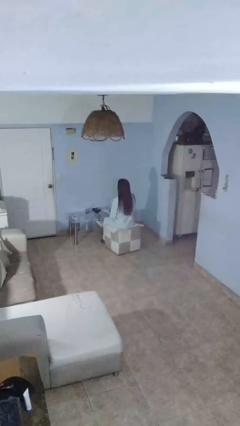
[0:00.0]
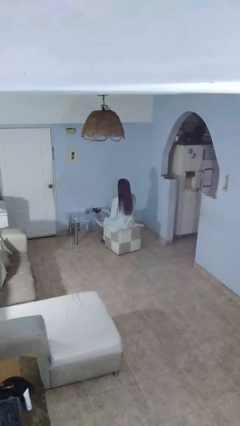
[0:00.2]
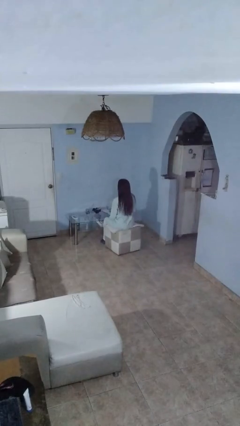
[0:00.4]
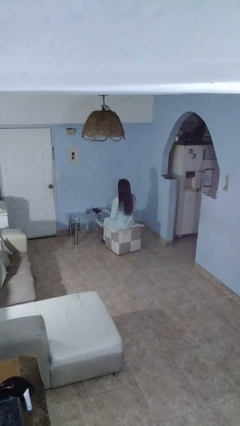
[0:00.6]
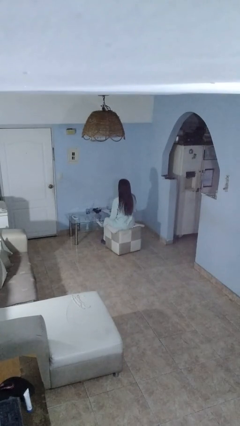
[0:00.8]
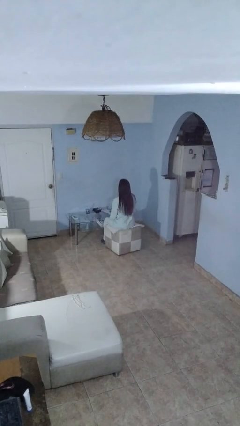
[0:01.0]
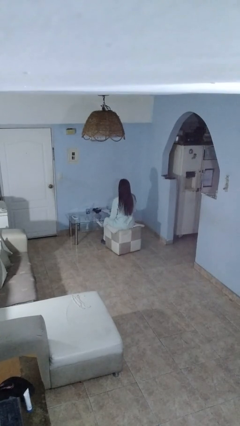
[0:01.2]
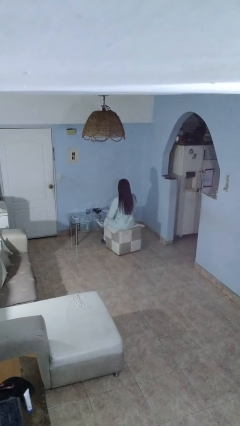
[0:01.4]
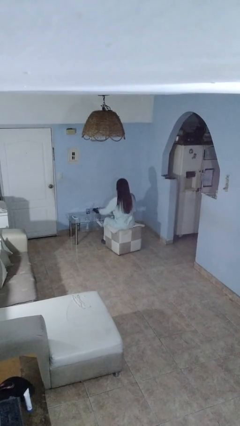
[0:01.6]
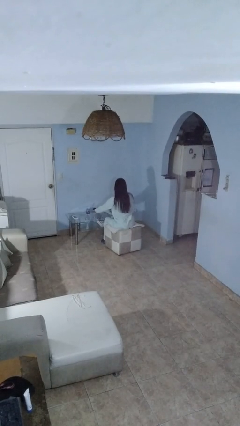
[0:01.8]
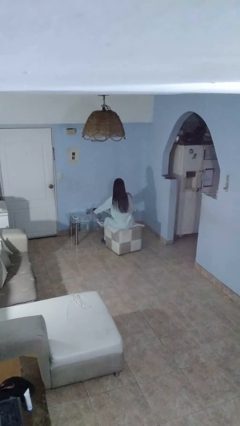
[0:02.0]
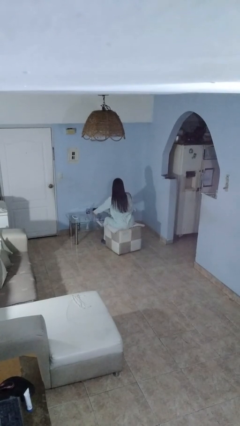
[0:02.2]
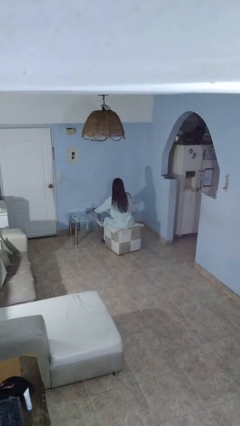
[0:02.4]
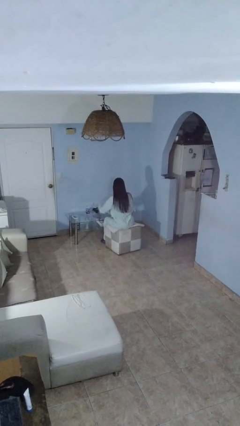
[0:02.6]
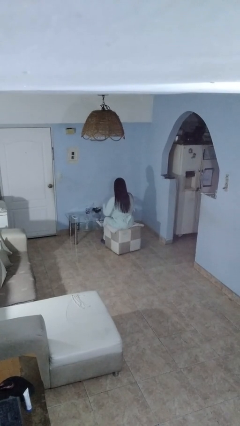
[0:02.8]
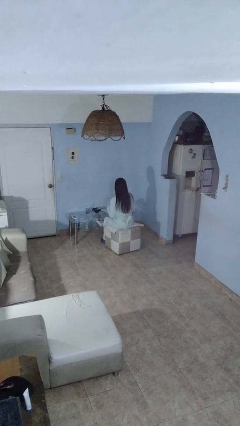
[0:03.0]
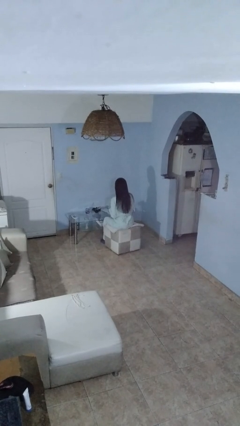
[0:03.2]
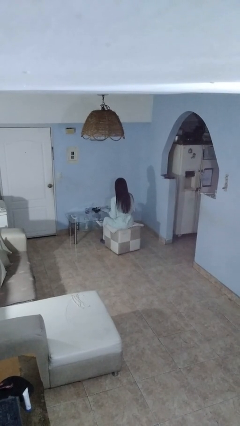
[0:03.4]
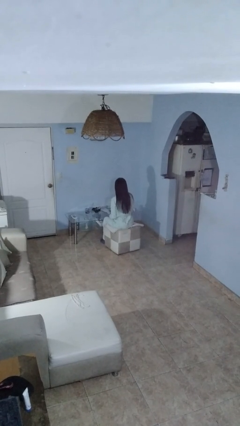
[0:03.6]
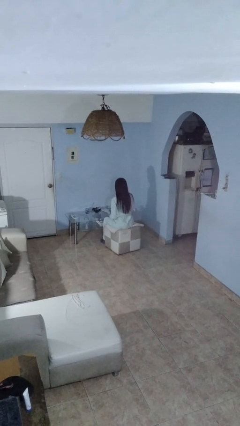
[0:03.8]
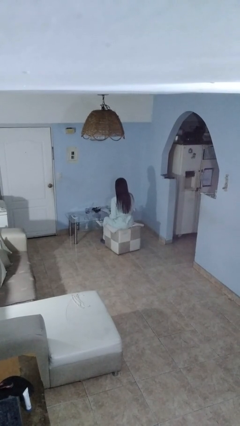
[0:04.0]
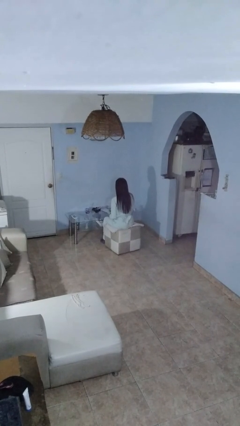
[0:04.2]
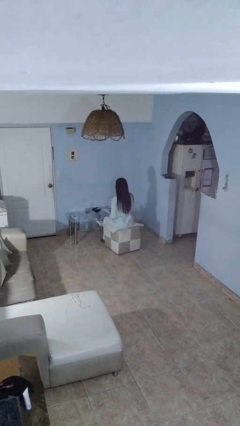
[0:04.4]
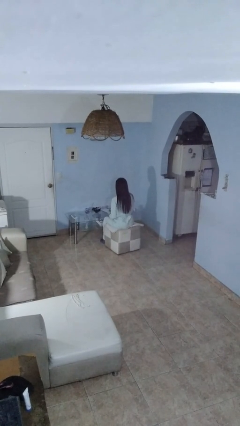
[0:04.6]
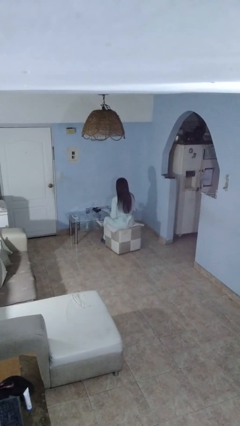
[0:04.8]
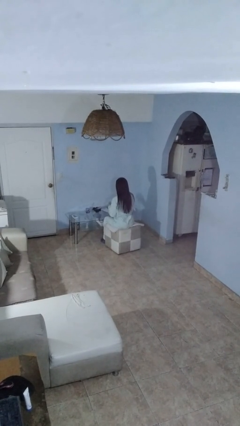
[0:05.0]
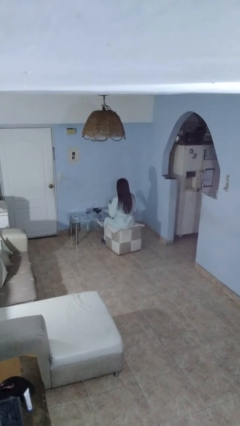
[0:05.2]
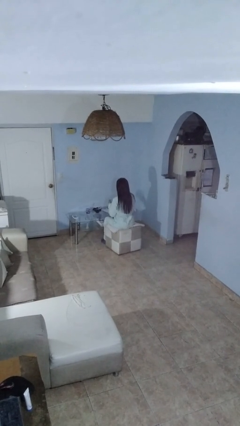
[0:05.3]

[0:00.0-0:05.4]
person picks up object from table

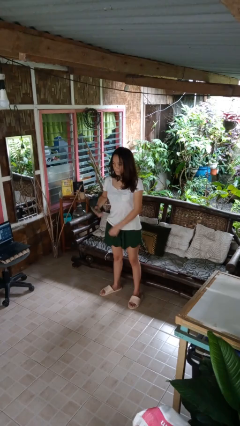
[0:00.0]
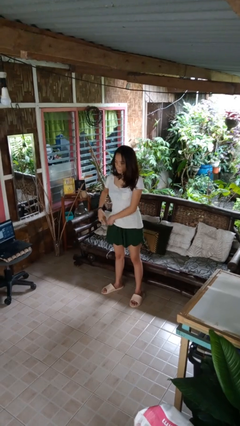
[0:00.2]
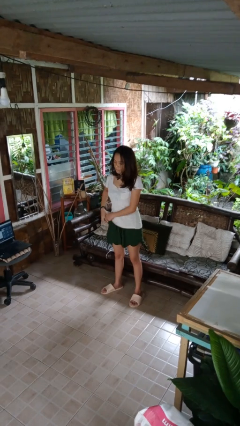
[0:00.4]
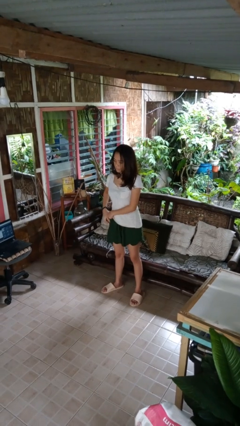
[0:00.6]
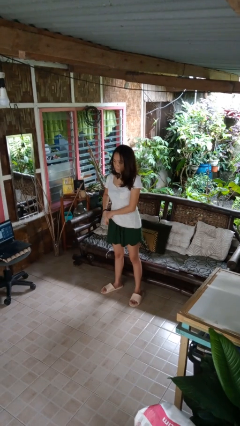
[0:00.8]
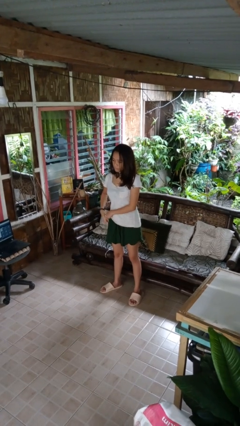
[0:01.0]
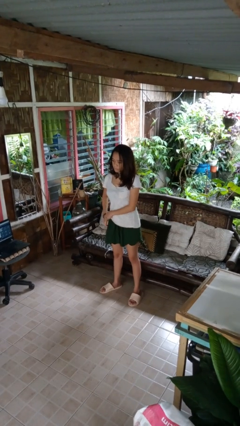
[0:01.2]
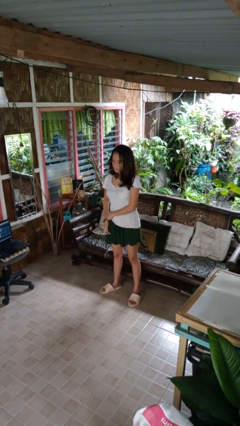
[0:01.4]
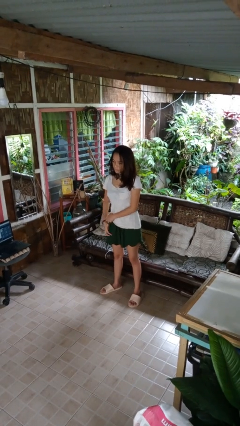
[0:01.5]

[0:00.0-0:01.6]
person puts phone into pocket

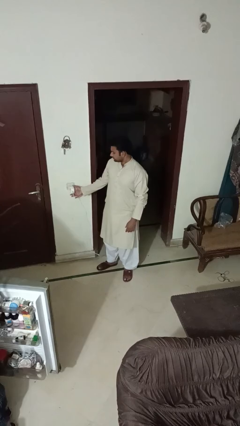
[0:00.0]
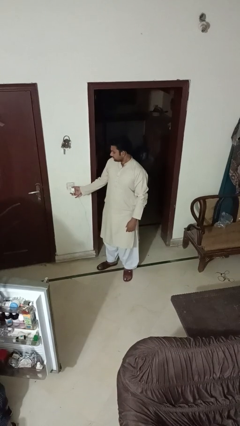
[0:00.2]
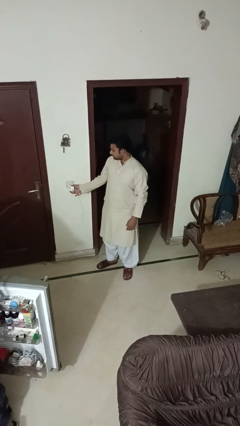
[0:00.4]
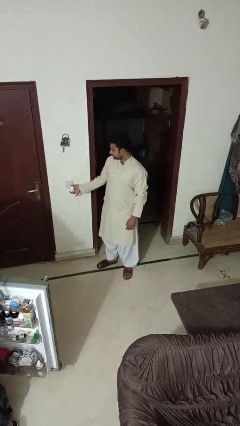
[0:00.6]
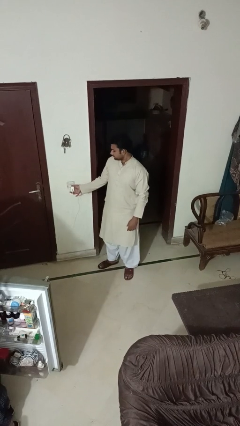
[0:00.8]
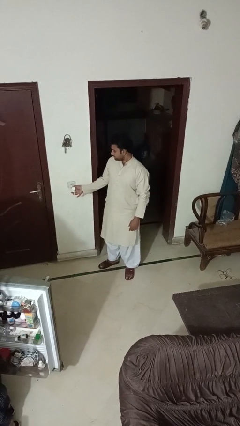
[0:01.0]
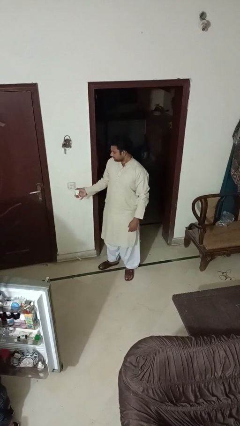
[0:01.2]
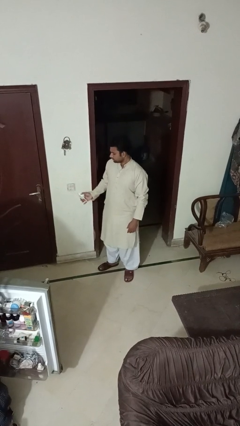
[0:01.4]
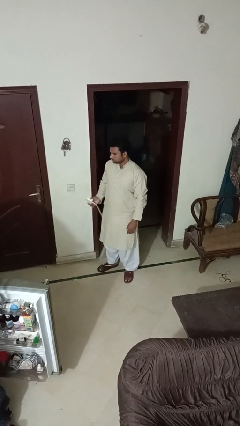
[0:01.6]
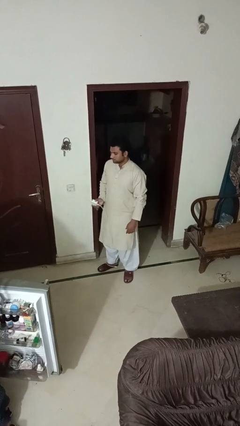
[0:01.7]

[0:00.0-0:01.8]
person unplugs from electrical socket

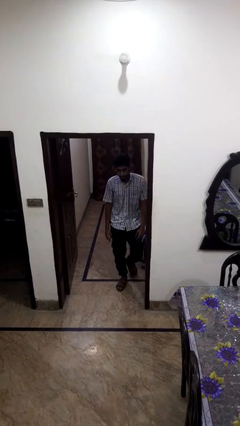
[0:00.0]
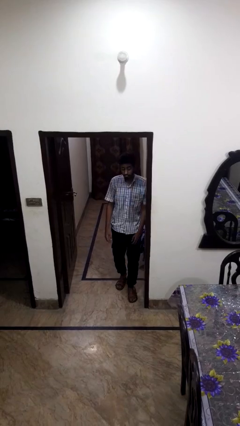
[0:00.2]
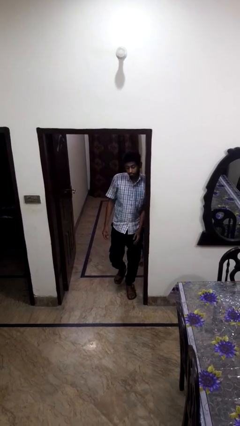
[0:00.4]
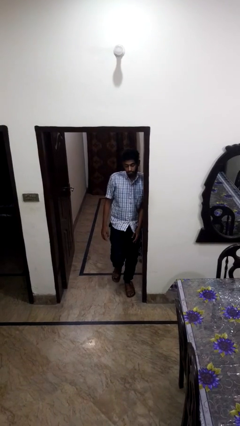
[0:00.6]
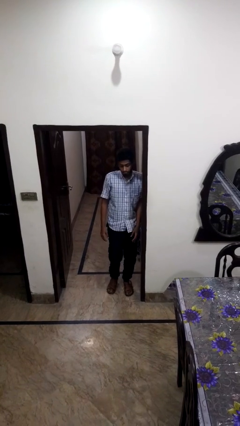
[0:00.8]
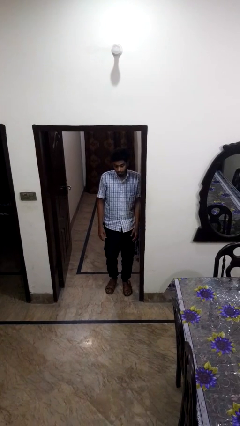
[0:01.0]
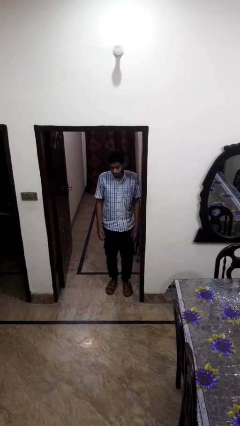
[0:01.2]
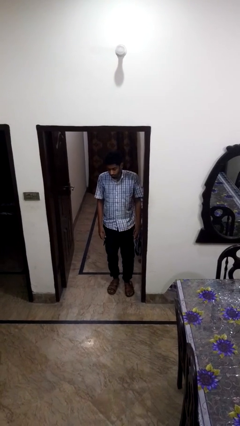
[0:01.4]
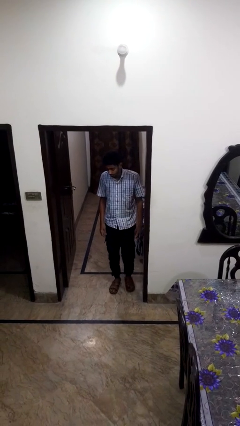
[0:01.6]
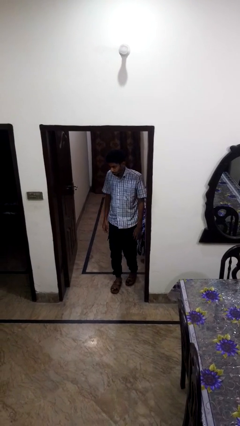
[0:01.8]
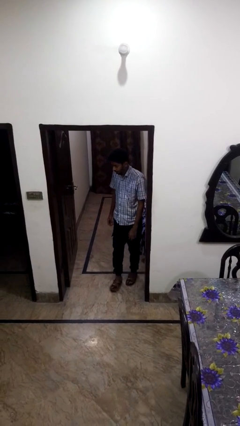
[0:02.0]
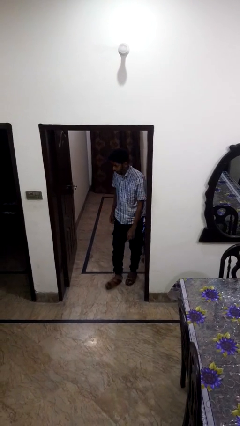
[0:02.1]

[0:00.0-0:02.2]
person bumps into wall

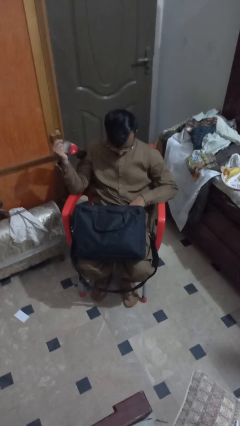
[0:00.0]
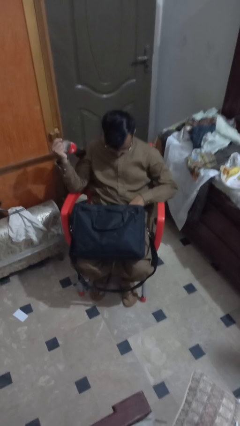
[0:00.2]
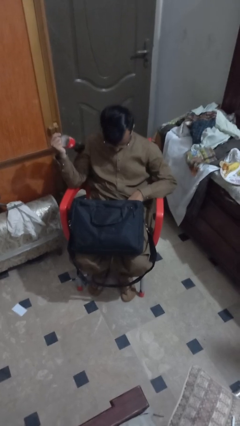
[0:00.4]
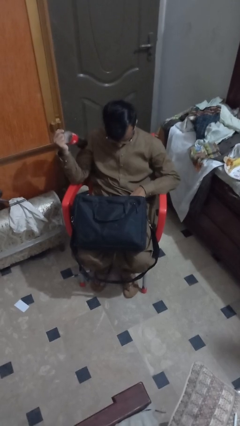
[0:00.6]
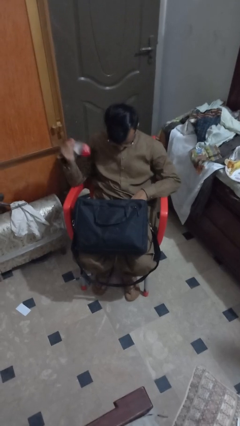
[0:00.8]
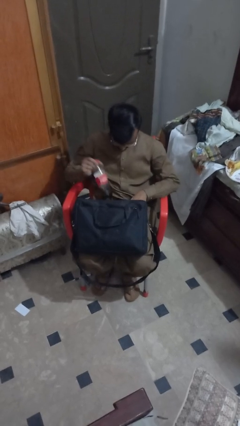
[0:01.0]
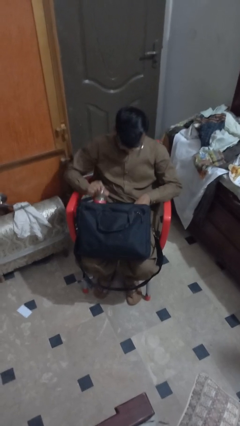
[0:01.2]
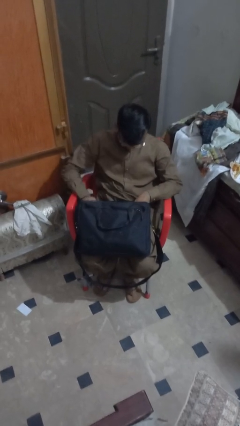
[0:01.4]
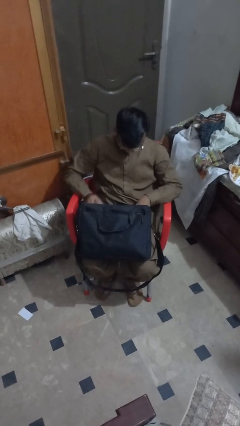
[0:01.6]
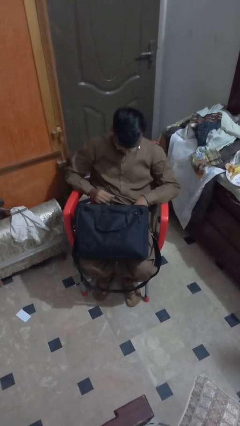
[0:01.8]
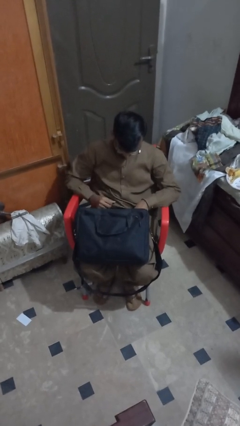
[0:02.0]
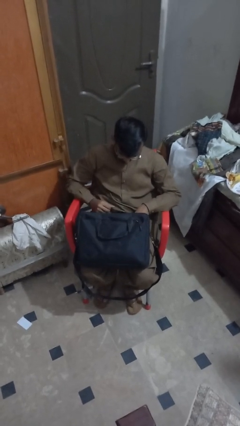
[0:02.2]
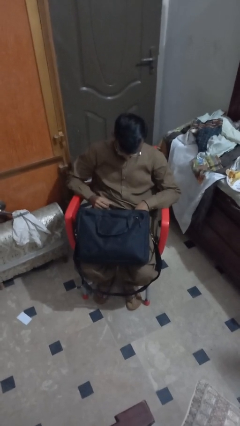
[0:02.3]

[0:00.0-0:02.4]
person puts object into bag

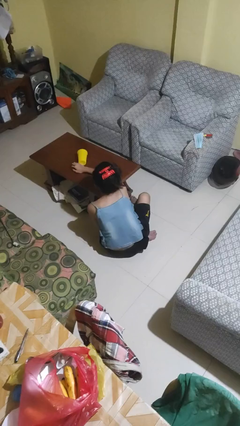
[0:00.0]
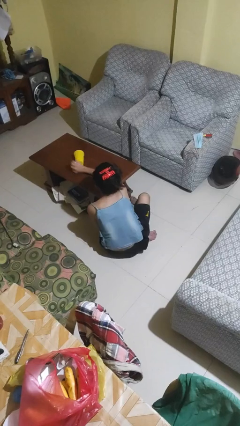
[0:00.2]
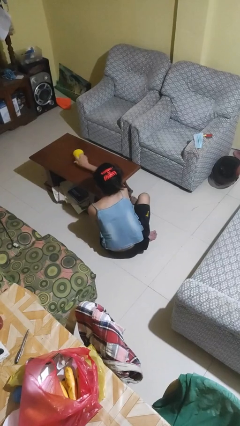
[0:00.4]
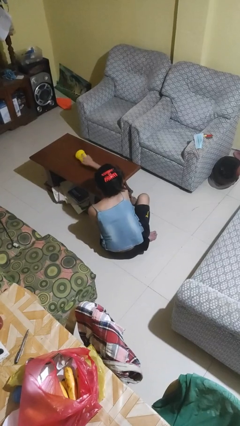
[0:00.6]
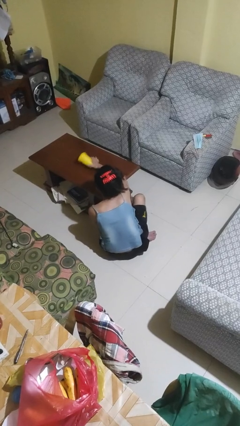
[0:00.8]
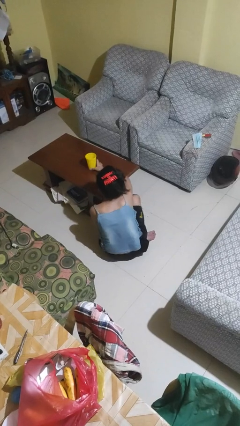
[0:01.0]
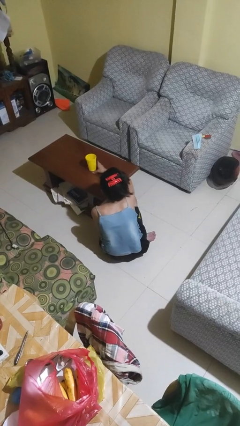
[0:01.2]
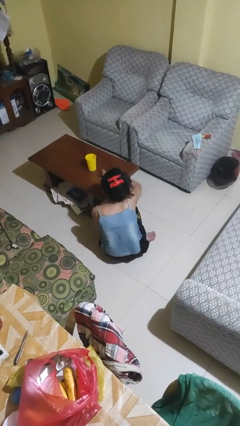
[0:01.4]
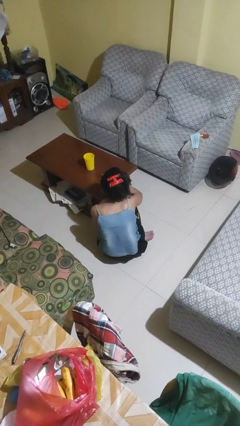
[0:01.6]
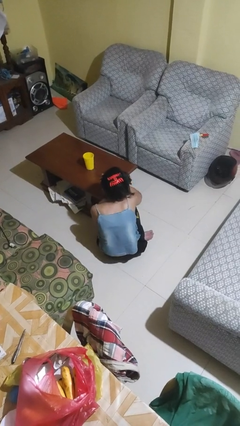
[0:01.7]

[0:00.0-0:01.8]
person sets upright glass

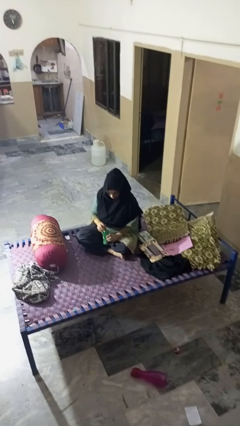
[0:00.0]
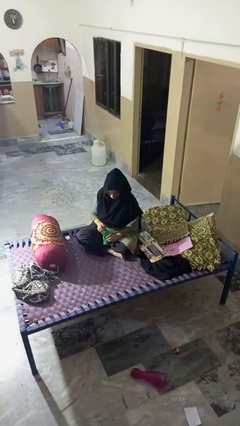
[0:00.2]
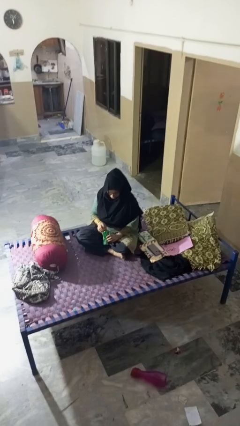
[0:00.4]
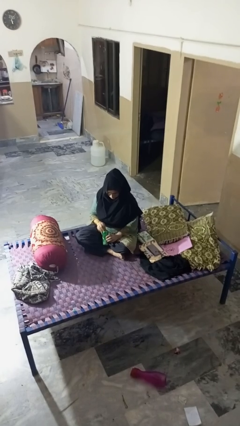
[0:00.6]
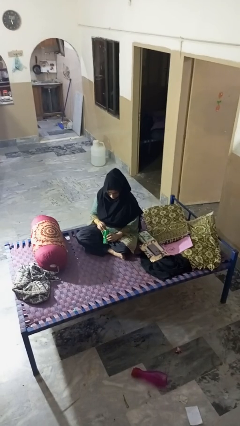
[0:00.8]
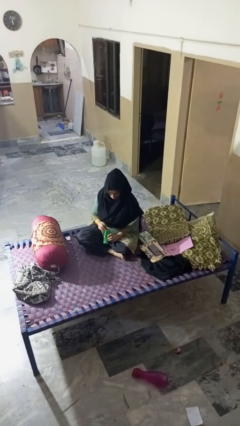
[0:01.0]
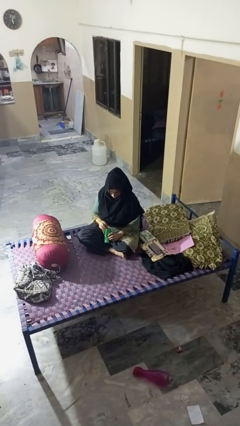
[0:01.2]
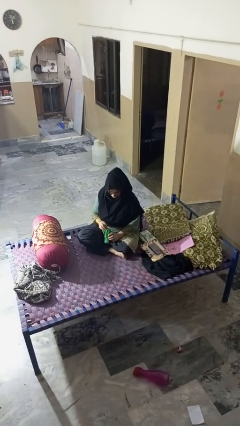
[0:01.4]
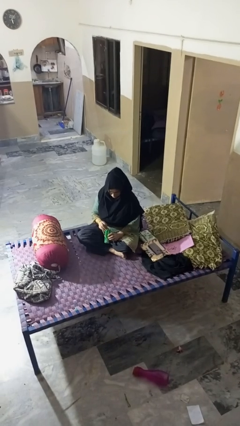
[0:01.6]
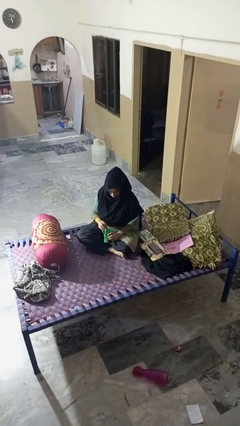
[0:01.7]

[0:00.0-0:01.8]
person opens can with can opener
